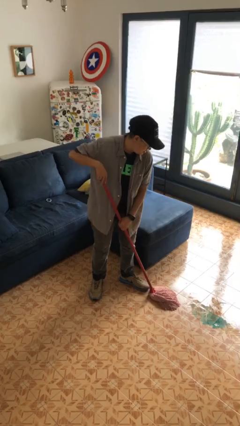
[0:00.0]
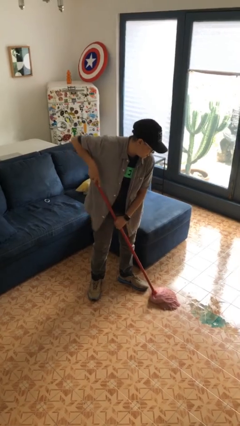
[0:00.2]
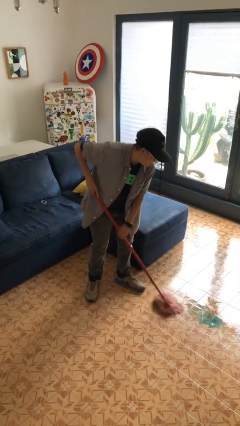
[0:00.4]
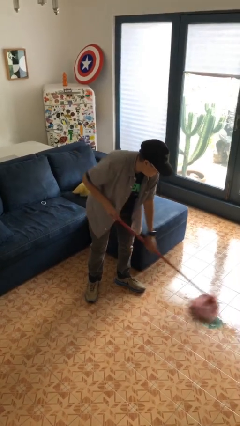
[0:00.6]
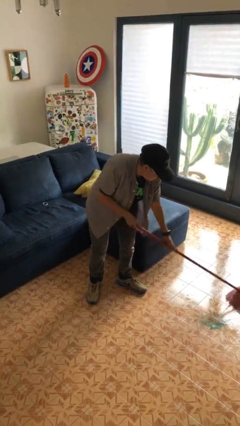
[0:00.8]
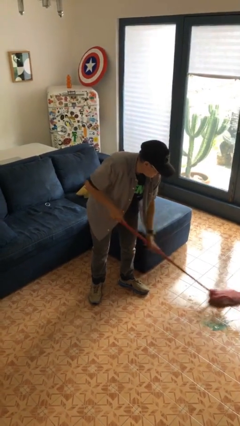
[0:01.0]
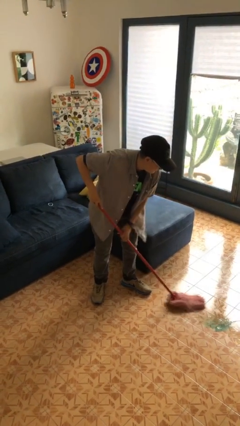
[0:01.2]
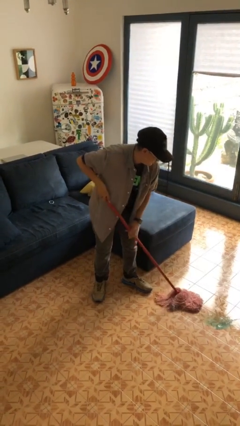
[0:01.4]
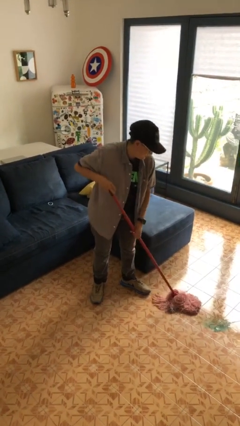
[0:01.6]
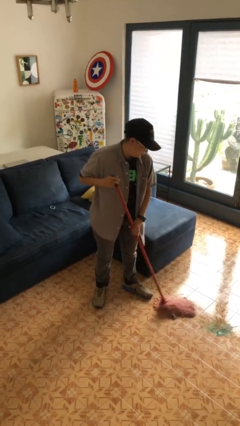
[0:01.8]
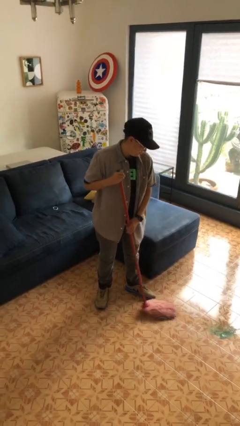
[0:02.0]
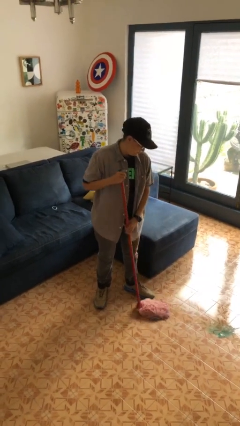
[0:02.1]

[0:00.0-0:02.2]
person mops

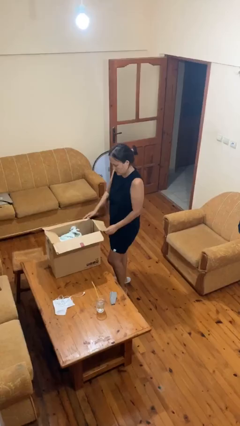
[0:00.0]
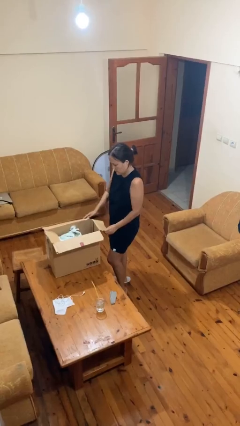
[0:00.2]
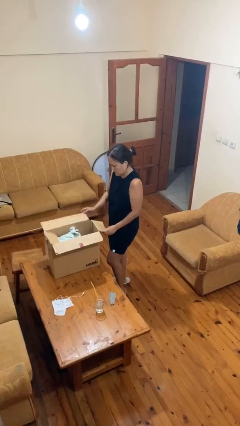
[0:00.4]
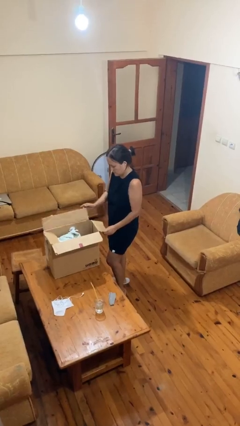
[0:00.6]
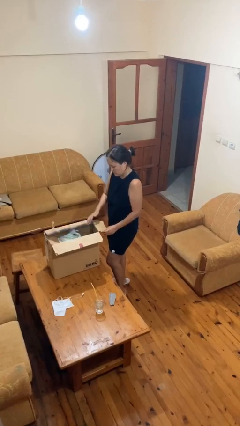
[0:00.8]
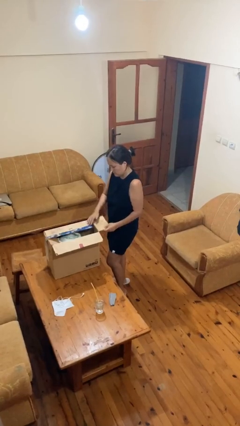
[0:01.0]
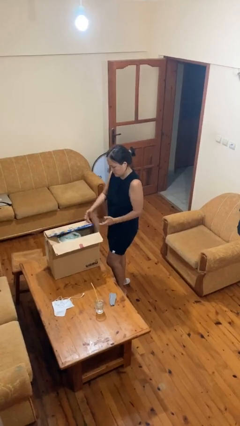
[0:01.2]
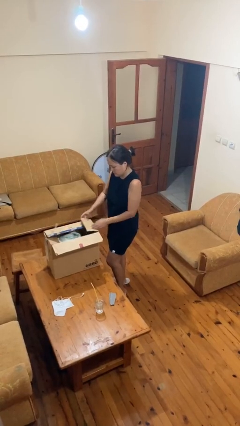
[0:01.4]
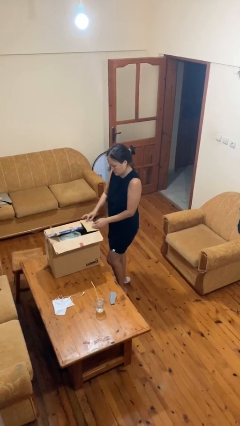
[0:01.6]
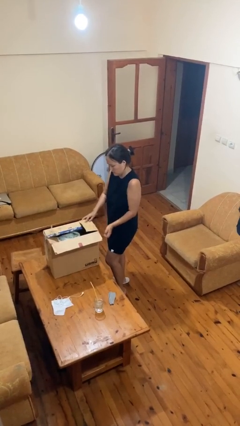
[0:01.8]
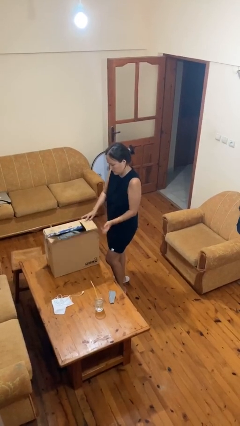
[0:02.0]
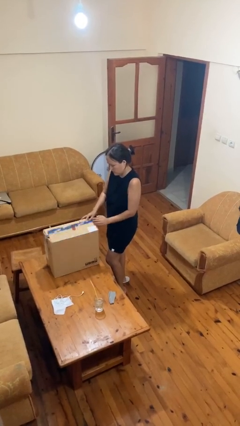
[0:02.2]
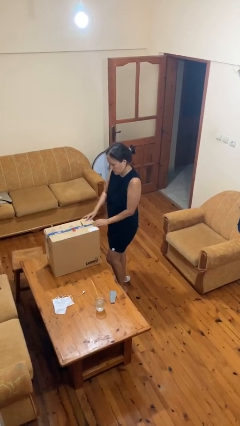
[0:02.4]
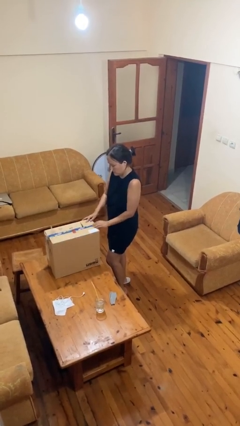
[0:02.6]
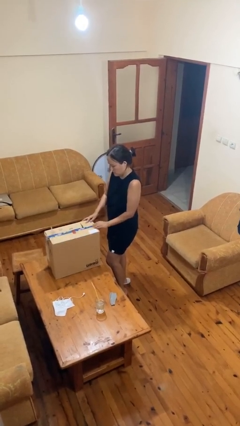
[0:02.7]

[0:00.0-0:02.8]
person closes box

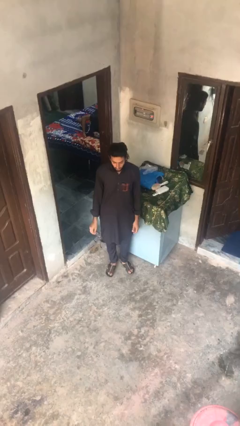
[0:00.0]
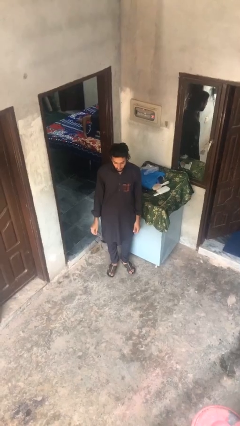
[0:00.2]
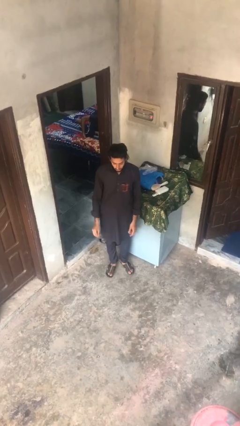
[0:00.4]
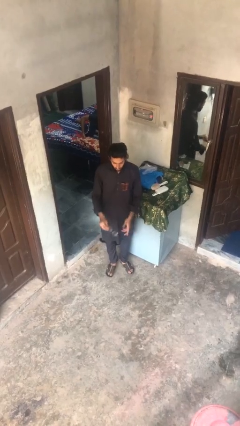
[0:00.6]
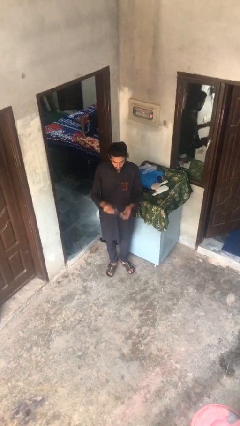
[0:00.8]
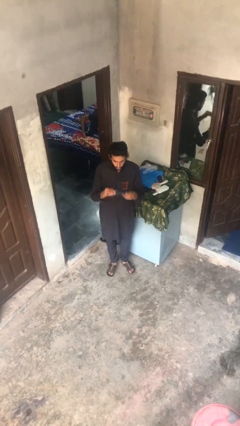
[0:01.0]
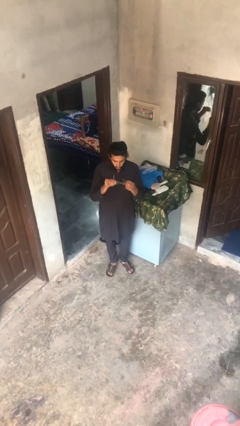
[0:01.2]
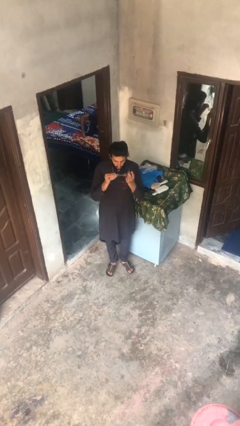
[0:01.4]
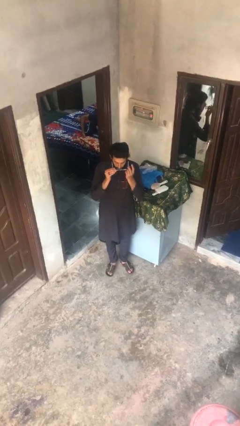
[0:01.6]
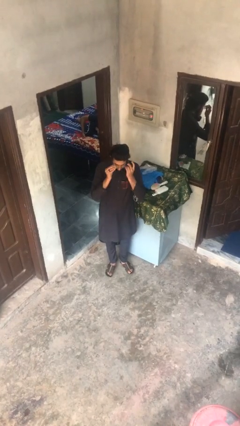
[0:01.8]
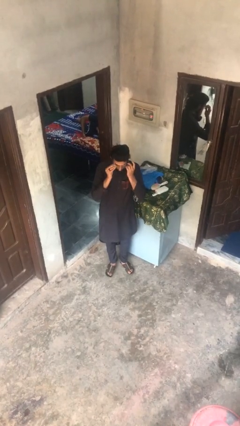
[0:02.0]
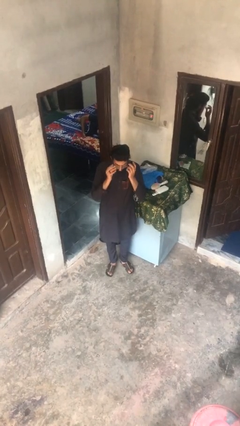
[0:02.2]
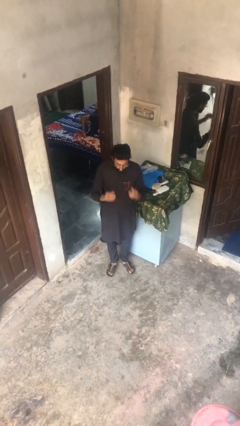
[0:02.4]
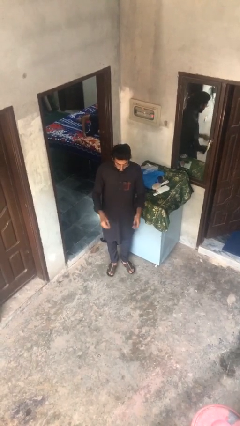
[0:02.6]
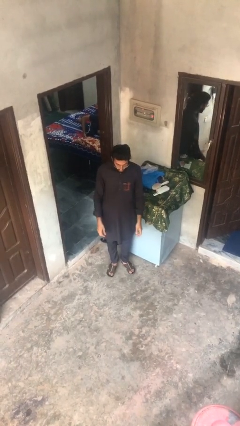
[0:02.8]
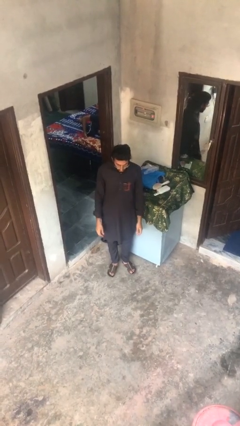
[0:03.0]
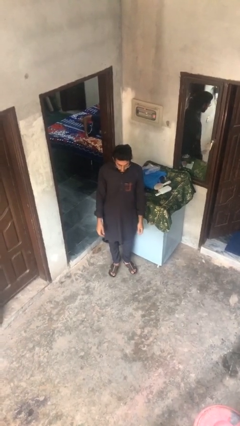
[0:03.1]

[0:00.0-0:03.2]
person puts on glasses

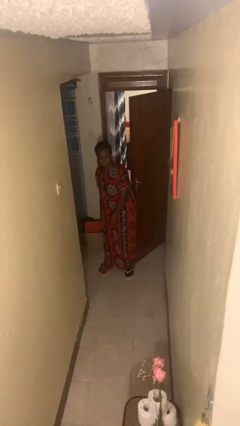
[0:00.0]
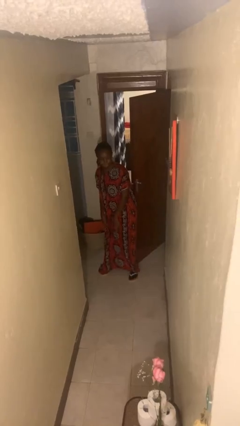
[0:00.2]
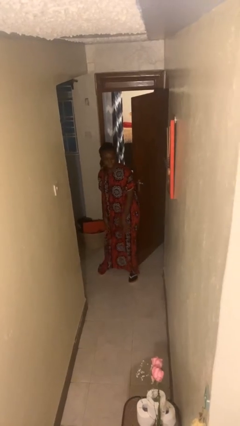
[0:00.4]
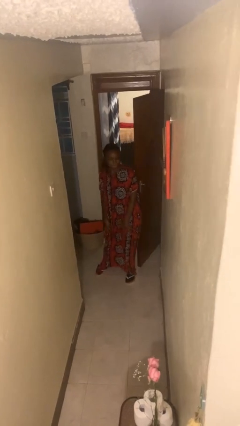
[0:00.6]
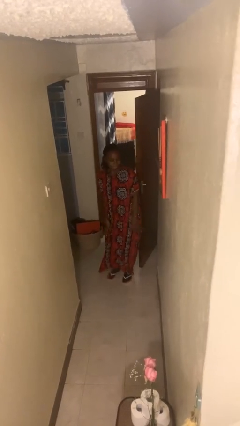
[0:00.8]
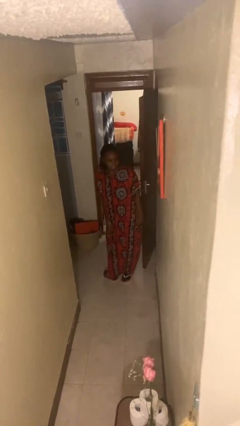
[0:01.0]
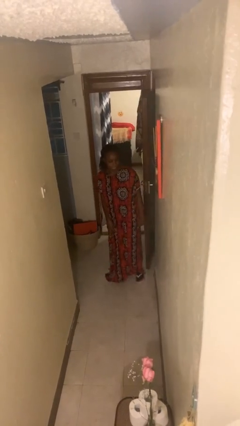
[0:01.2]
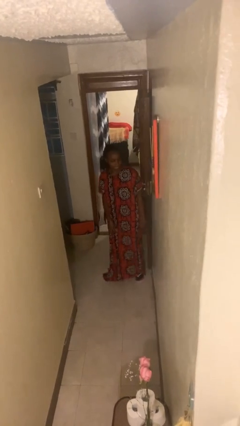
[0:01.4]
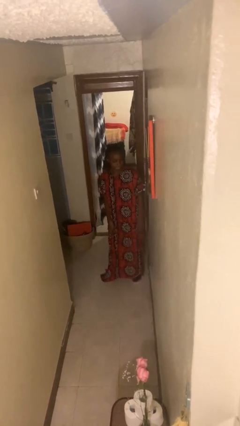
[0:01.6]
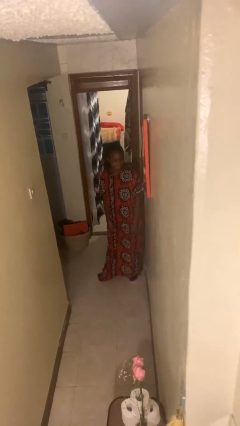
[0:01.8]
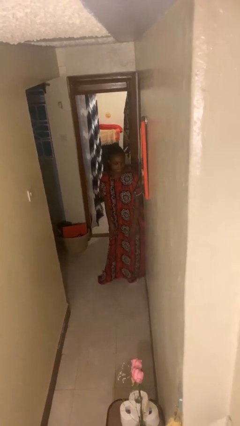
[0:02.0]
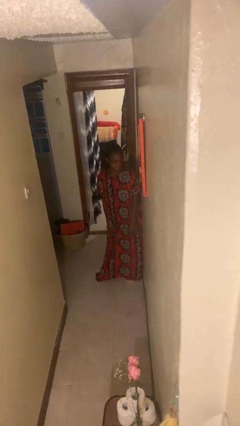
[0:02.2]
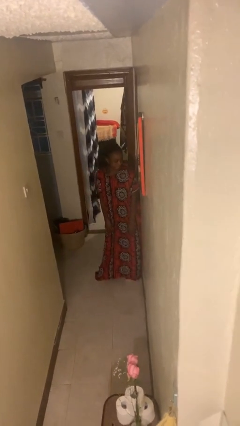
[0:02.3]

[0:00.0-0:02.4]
person closes door with hip

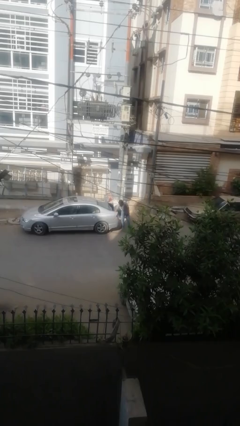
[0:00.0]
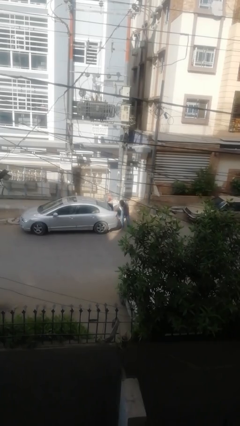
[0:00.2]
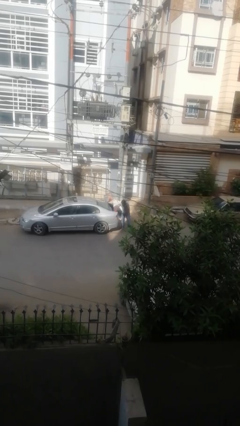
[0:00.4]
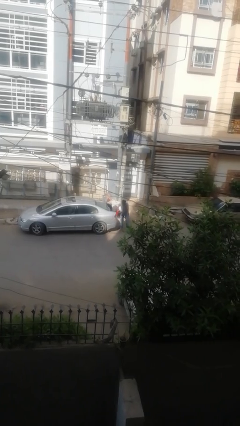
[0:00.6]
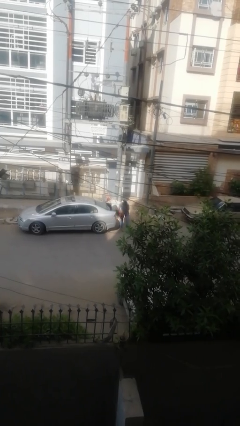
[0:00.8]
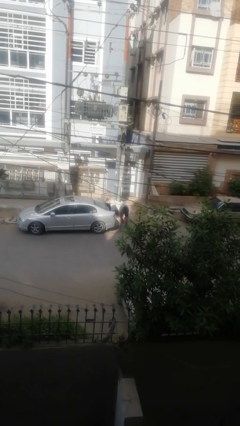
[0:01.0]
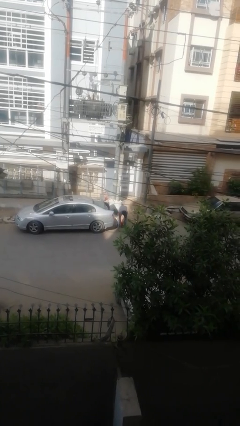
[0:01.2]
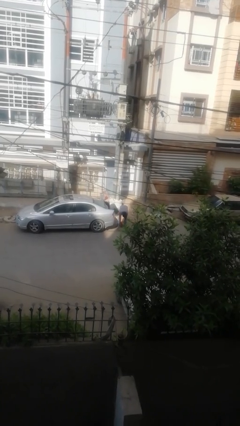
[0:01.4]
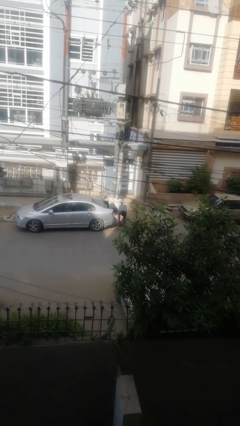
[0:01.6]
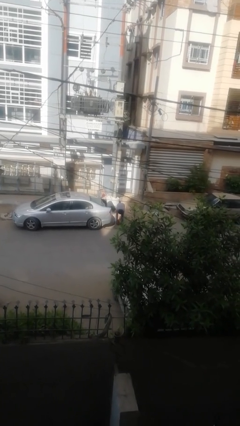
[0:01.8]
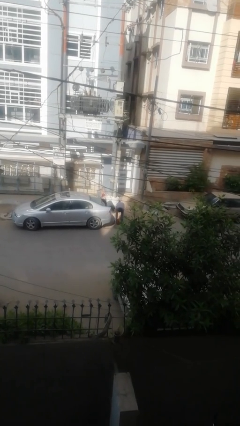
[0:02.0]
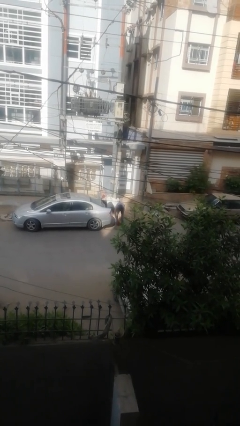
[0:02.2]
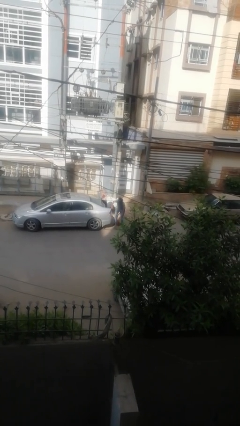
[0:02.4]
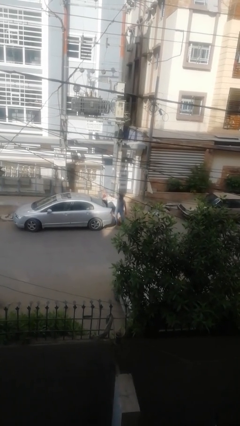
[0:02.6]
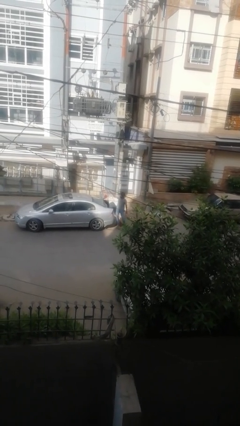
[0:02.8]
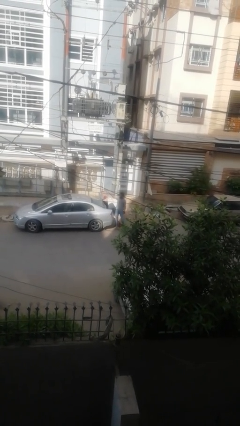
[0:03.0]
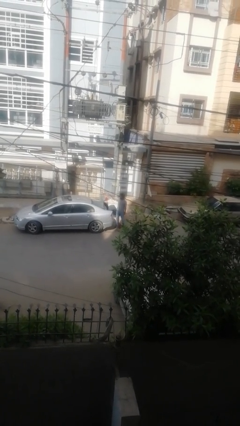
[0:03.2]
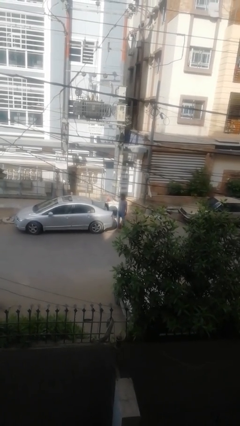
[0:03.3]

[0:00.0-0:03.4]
person exits car

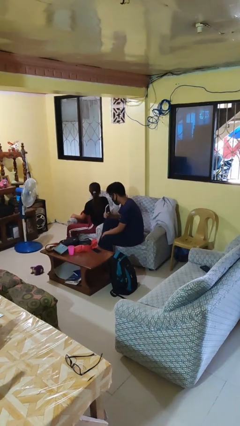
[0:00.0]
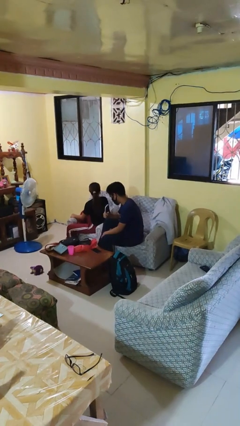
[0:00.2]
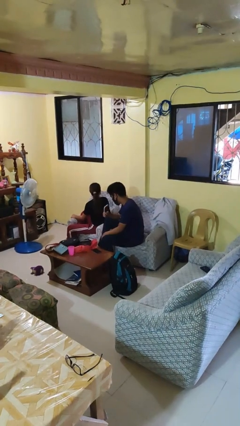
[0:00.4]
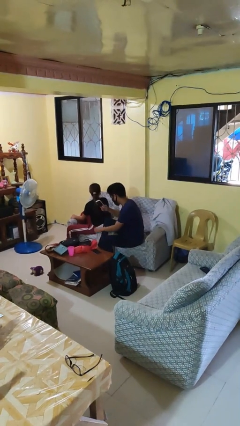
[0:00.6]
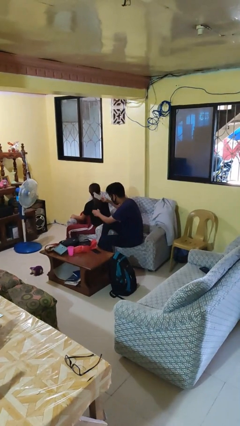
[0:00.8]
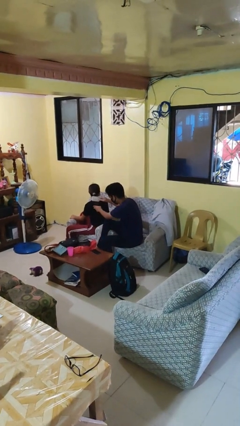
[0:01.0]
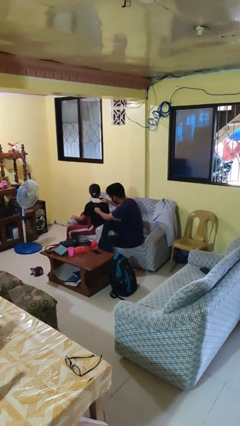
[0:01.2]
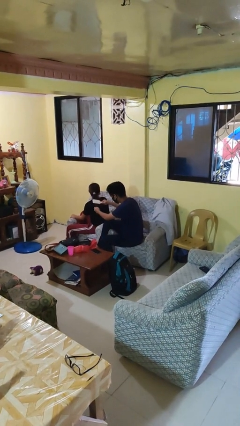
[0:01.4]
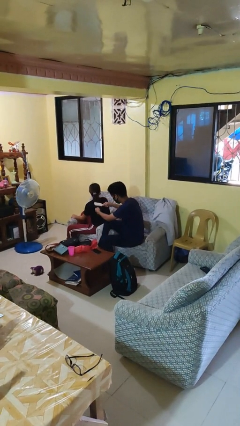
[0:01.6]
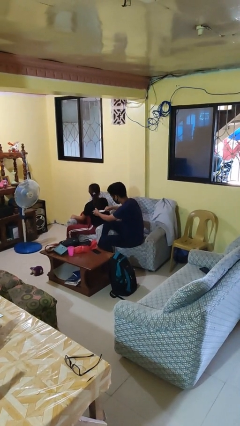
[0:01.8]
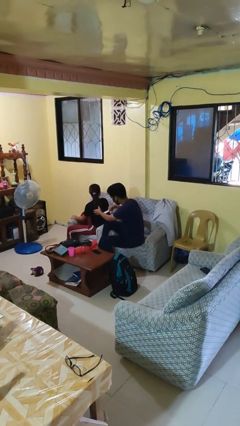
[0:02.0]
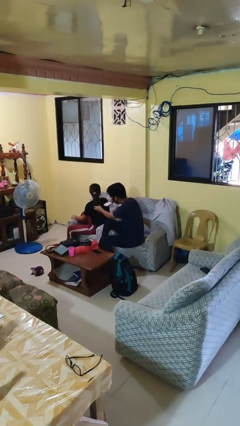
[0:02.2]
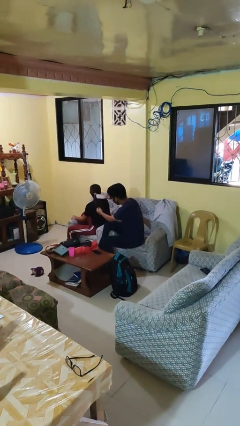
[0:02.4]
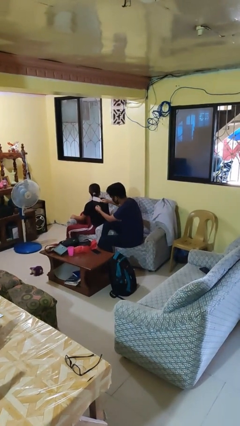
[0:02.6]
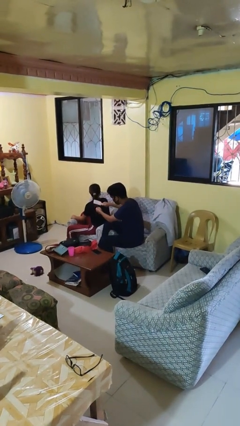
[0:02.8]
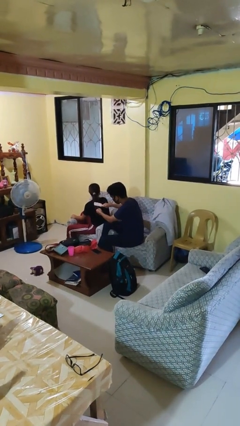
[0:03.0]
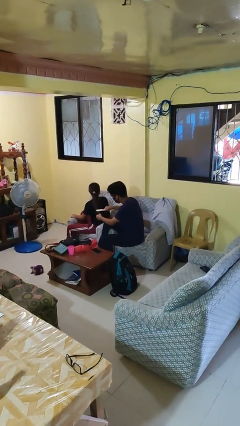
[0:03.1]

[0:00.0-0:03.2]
person brushes hair of person

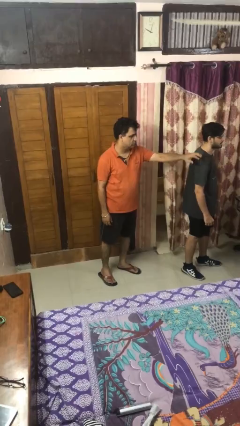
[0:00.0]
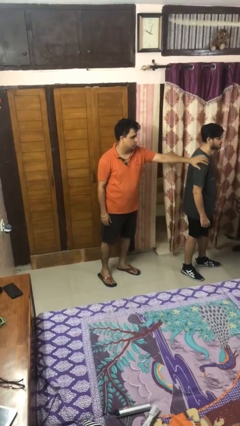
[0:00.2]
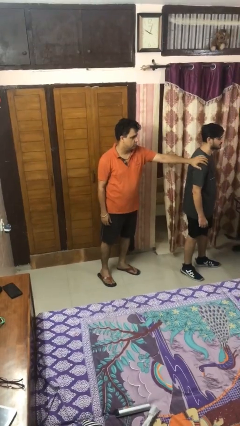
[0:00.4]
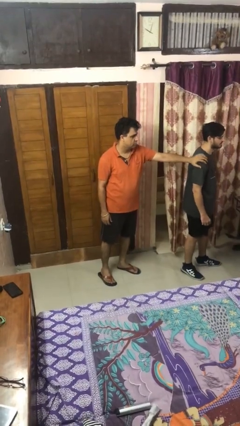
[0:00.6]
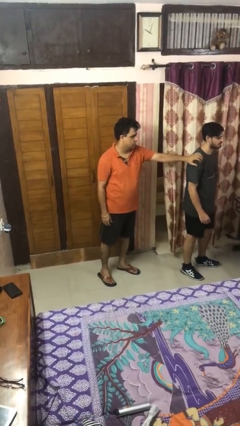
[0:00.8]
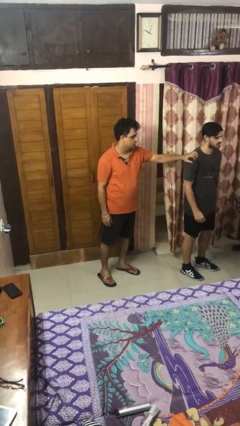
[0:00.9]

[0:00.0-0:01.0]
person grabs person by shoulder
